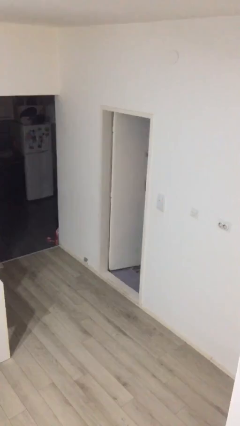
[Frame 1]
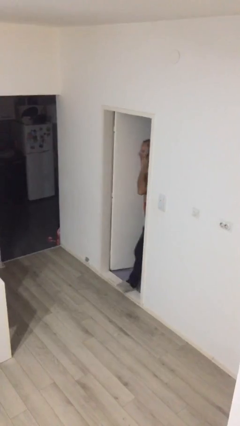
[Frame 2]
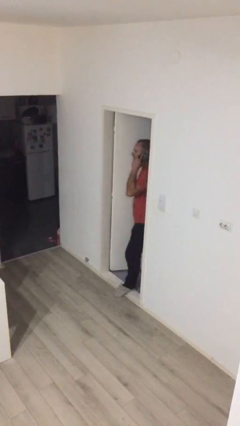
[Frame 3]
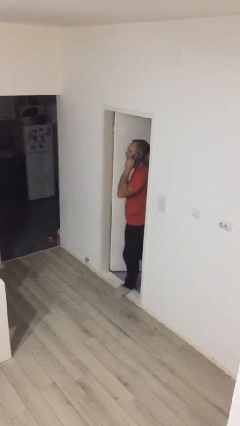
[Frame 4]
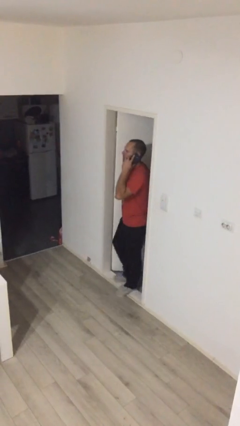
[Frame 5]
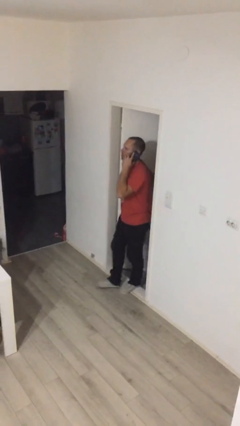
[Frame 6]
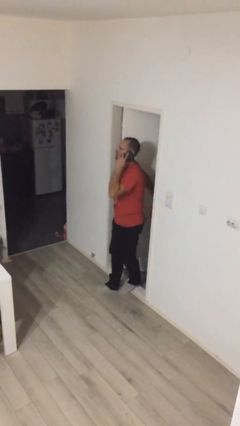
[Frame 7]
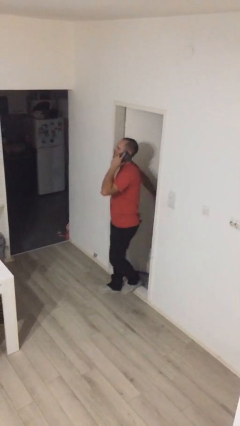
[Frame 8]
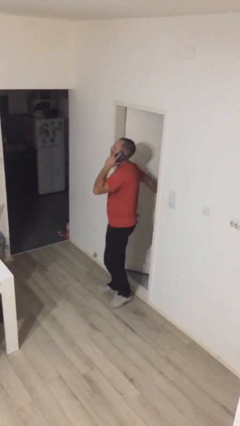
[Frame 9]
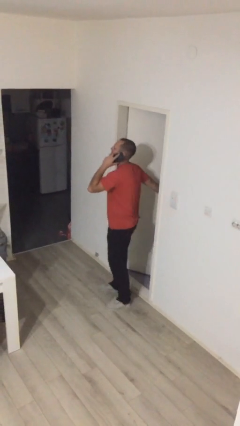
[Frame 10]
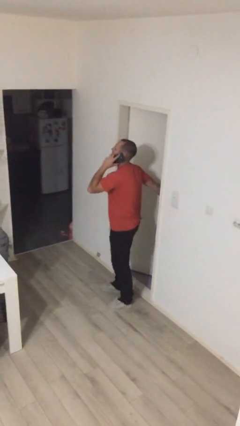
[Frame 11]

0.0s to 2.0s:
person enters scene through structure

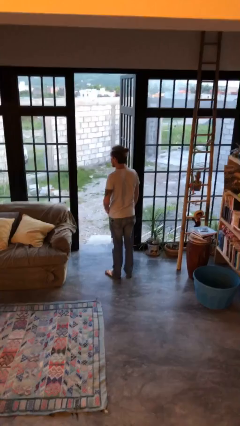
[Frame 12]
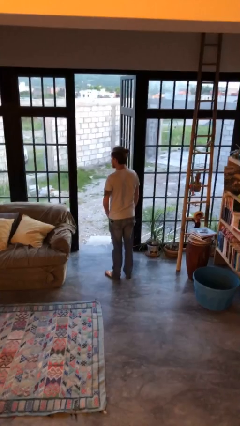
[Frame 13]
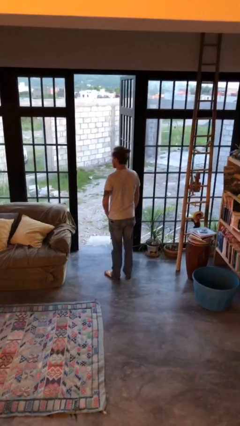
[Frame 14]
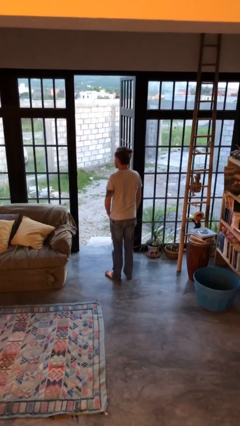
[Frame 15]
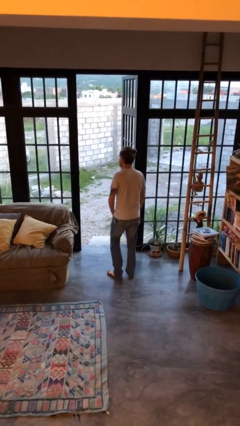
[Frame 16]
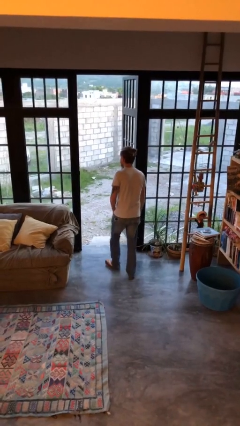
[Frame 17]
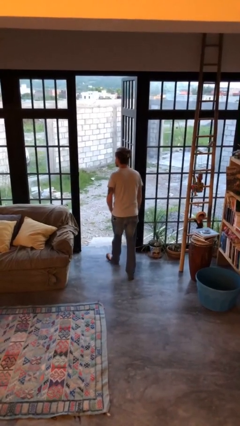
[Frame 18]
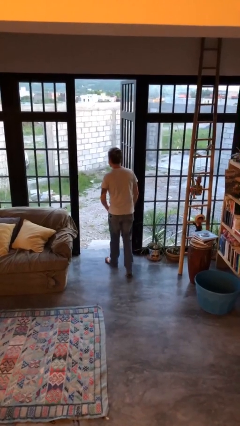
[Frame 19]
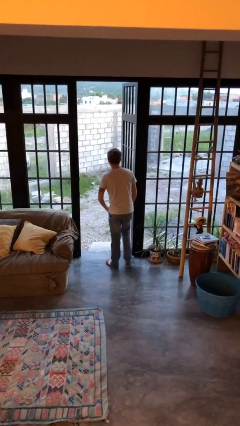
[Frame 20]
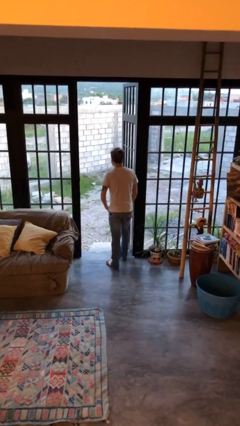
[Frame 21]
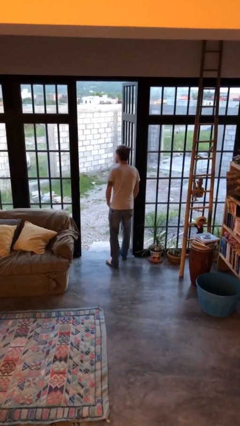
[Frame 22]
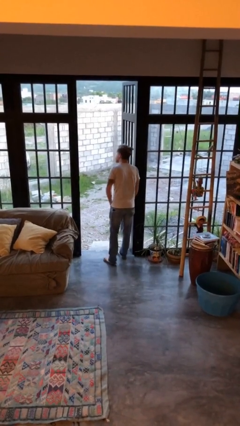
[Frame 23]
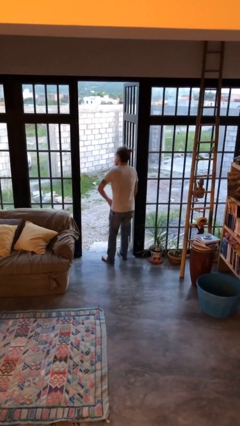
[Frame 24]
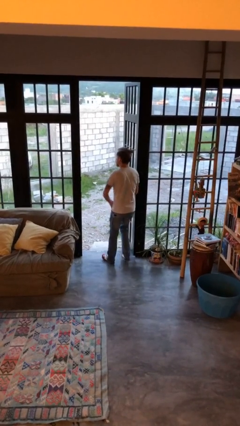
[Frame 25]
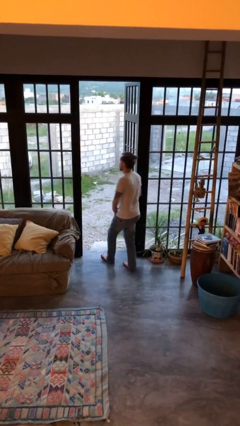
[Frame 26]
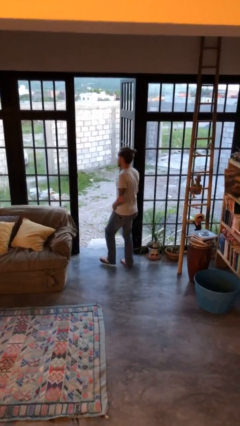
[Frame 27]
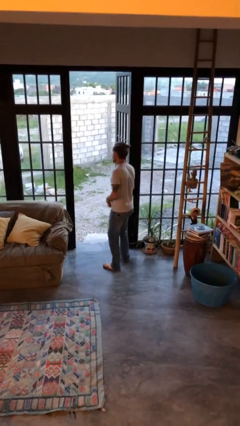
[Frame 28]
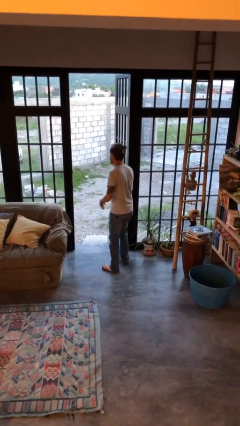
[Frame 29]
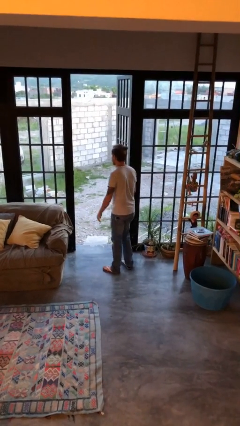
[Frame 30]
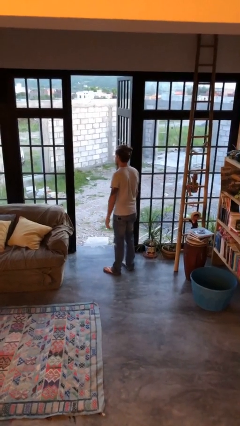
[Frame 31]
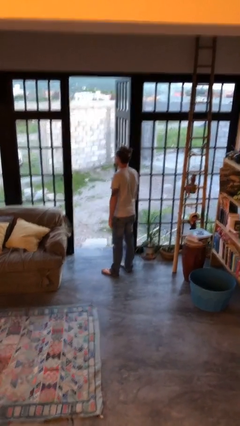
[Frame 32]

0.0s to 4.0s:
person bumps into wall

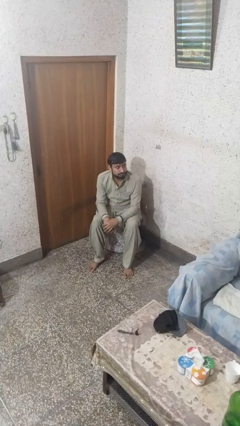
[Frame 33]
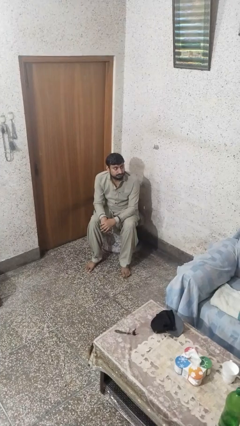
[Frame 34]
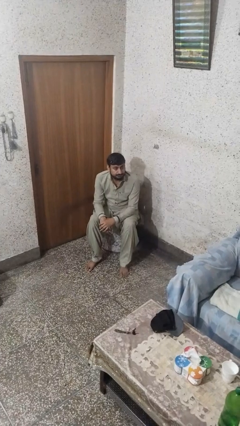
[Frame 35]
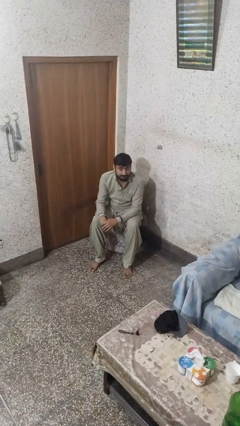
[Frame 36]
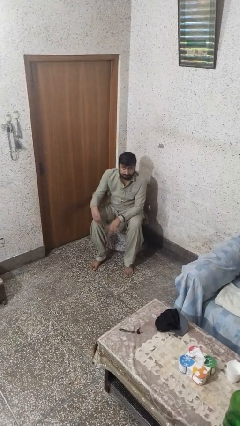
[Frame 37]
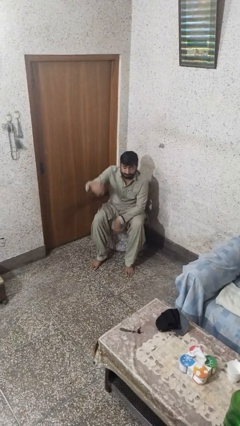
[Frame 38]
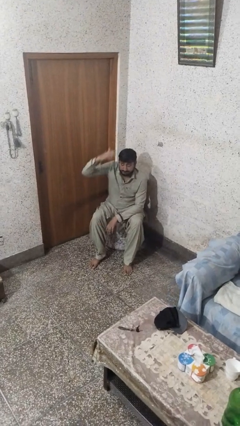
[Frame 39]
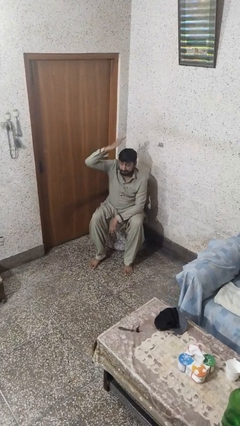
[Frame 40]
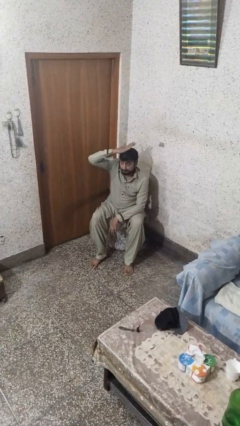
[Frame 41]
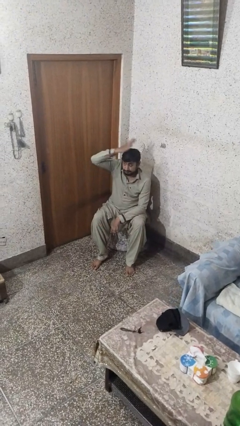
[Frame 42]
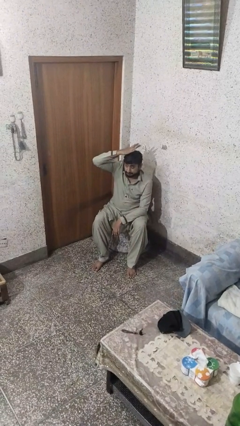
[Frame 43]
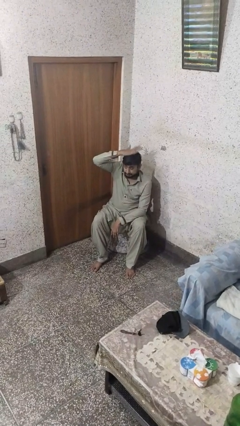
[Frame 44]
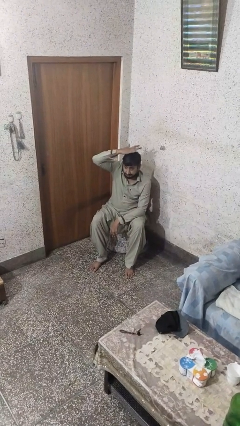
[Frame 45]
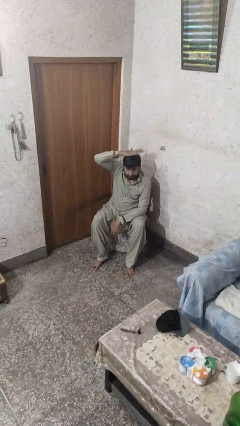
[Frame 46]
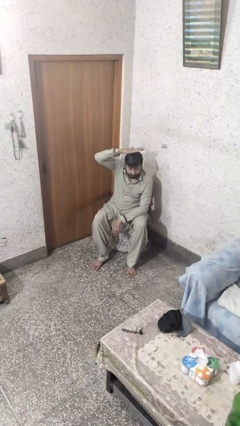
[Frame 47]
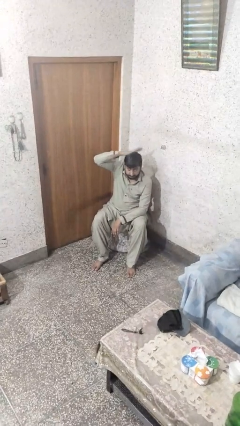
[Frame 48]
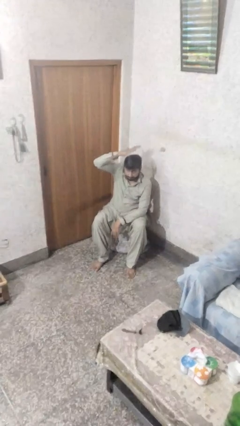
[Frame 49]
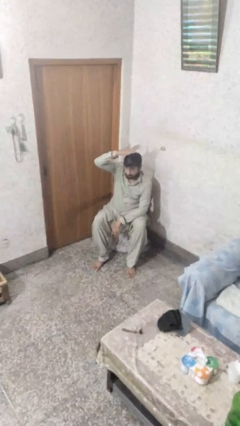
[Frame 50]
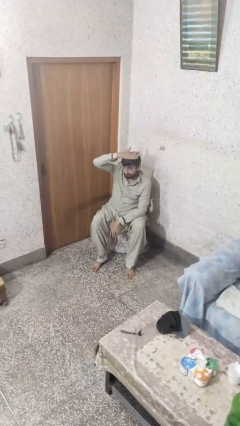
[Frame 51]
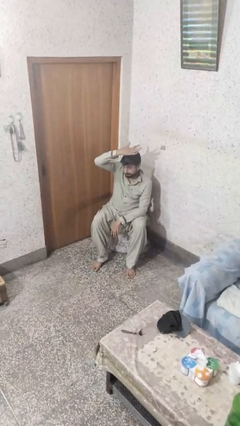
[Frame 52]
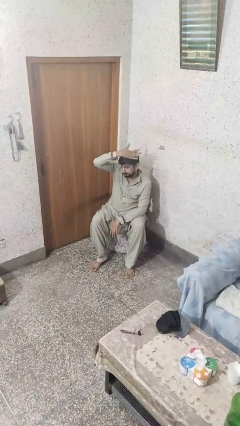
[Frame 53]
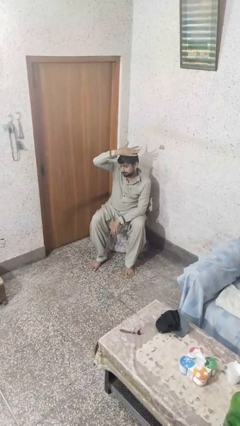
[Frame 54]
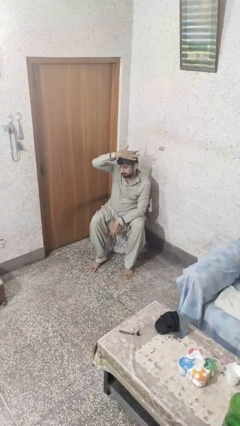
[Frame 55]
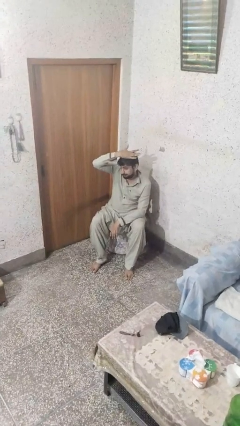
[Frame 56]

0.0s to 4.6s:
person pats head

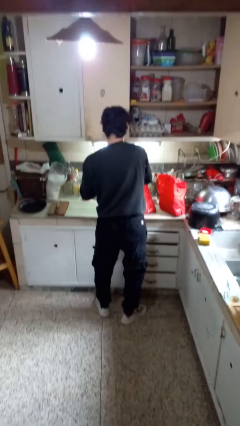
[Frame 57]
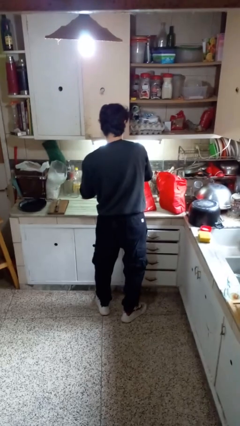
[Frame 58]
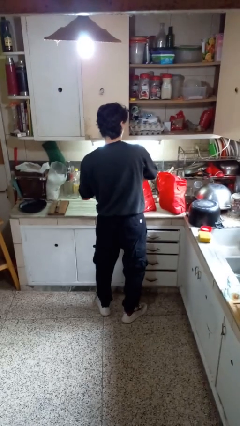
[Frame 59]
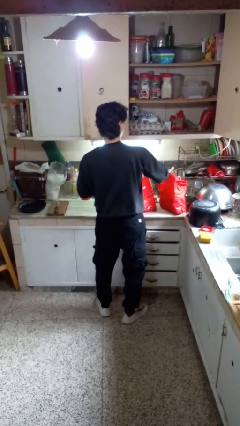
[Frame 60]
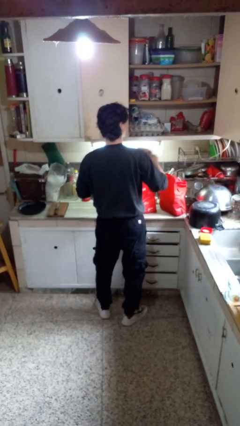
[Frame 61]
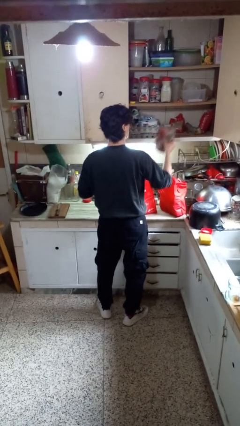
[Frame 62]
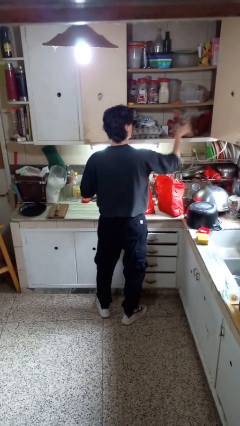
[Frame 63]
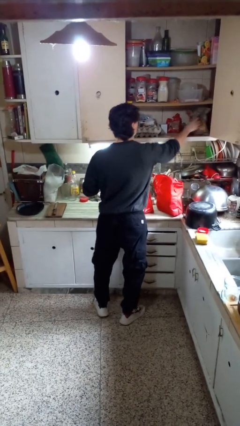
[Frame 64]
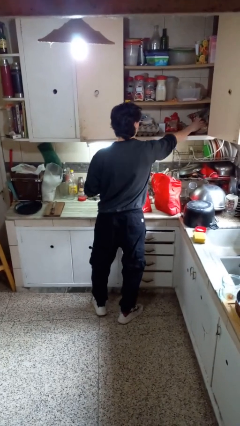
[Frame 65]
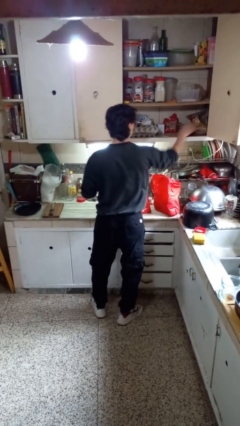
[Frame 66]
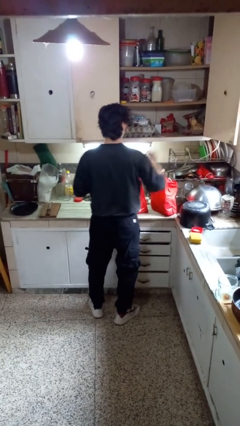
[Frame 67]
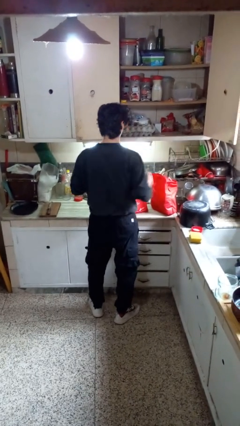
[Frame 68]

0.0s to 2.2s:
person loads groceries into cabinet

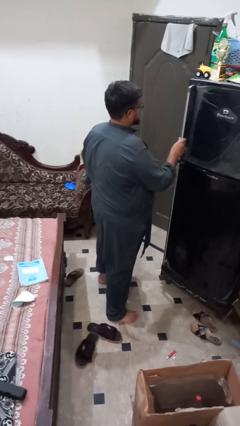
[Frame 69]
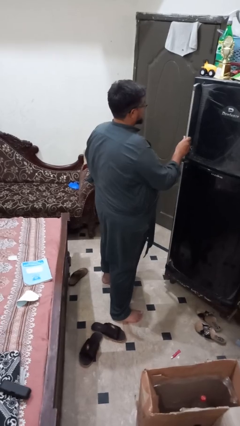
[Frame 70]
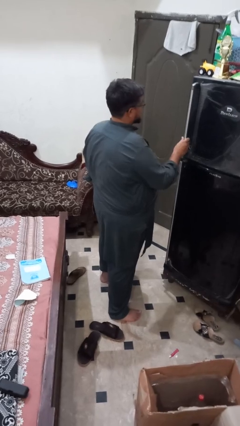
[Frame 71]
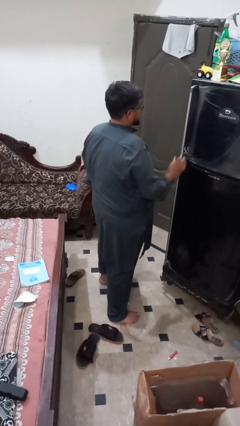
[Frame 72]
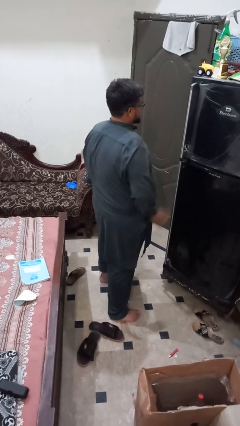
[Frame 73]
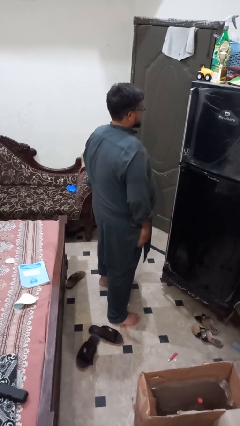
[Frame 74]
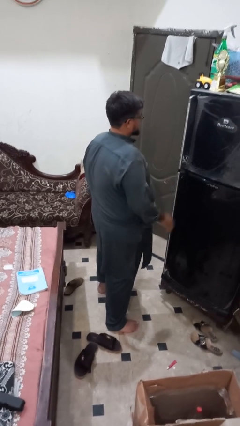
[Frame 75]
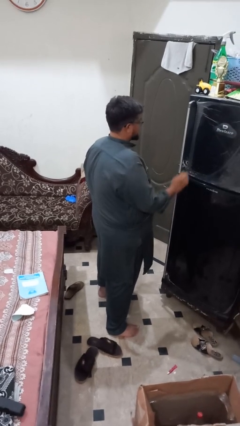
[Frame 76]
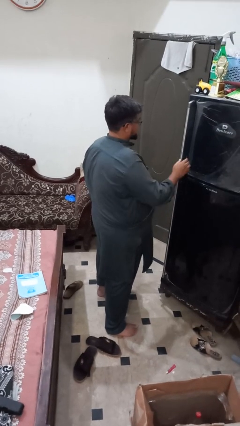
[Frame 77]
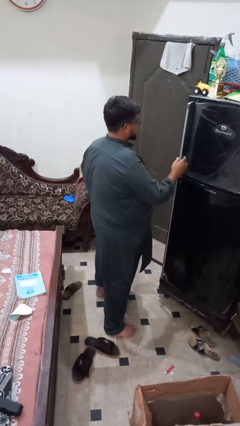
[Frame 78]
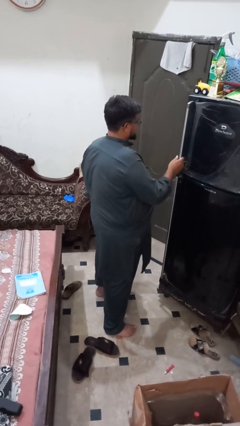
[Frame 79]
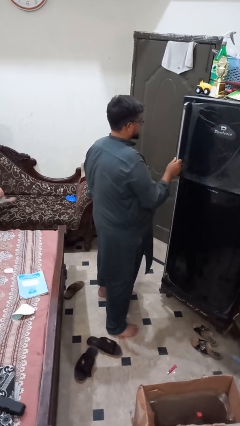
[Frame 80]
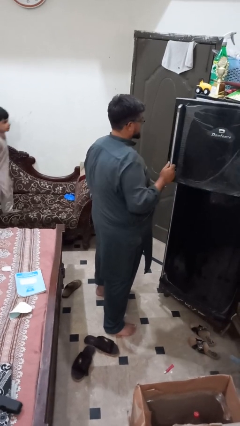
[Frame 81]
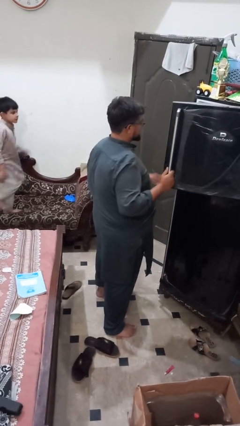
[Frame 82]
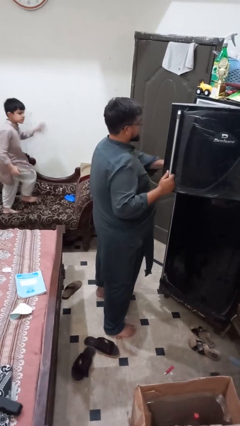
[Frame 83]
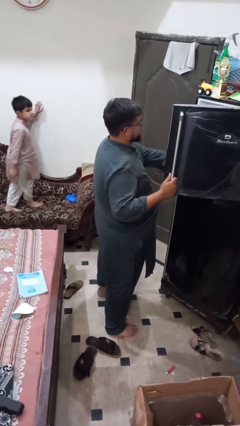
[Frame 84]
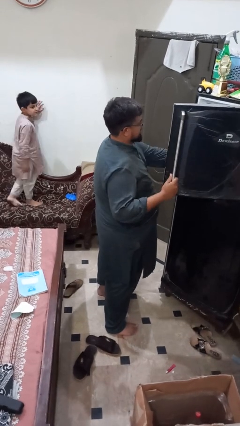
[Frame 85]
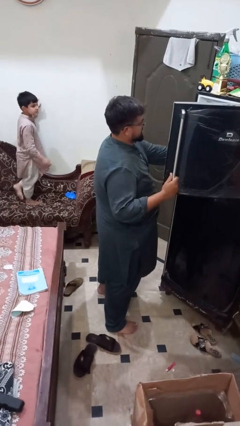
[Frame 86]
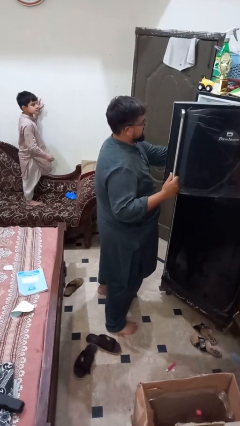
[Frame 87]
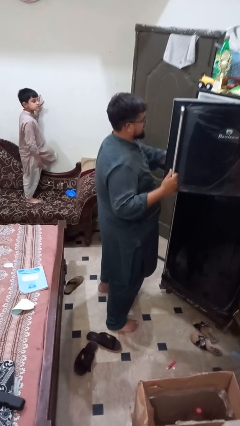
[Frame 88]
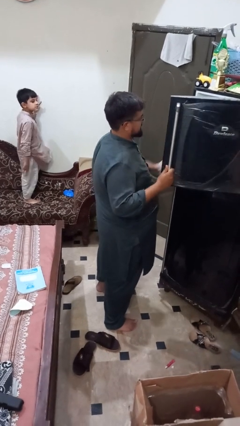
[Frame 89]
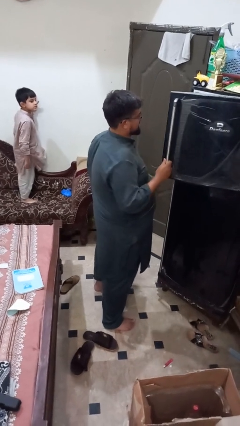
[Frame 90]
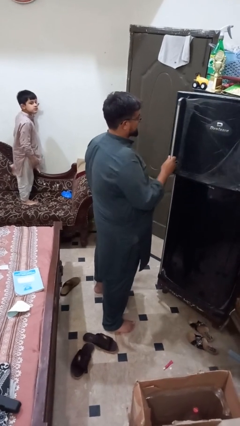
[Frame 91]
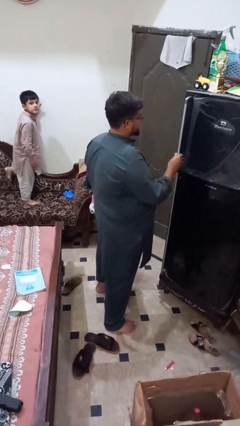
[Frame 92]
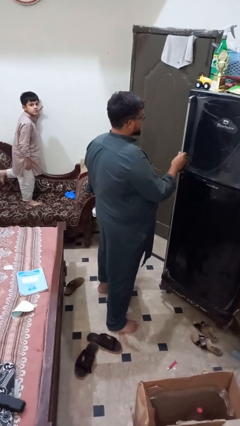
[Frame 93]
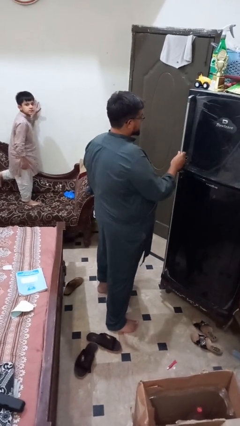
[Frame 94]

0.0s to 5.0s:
person takes object from refrigerator
